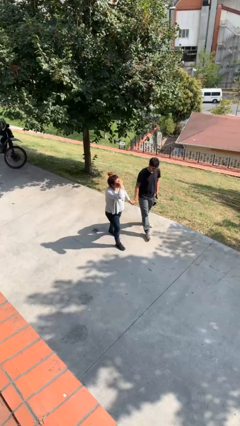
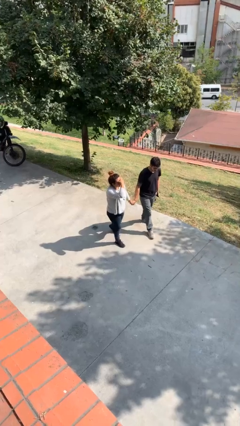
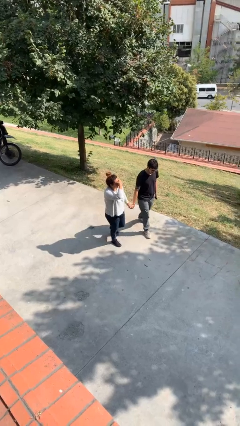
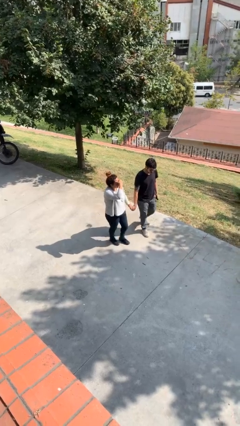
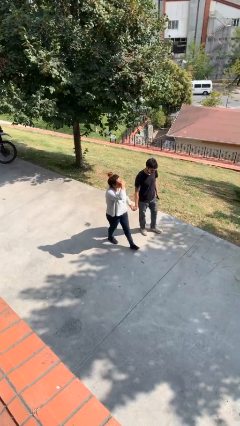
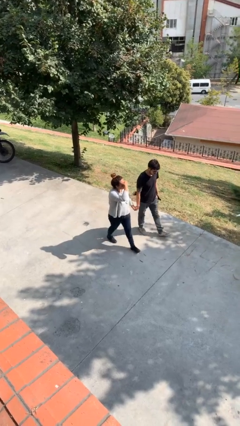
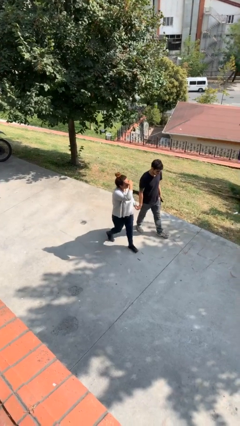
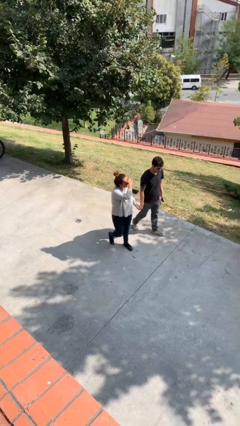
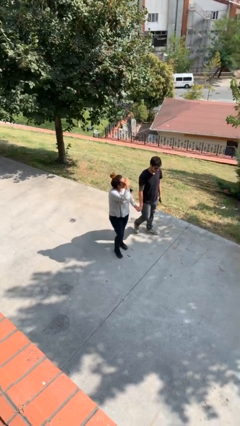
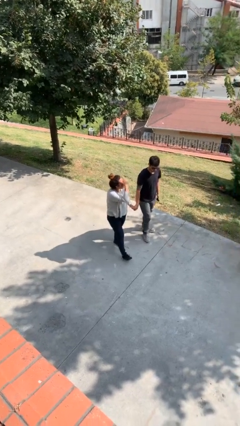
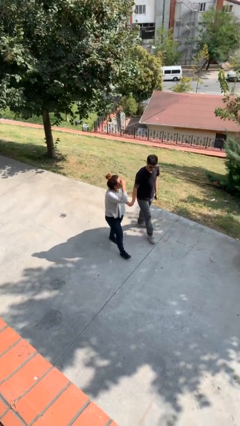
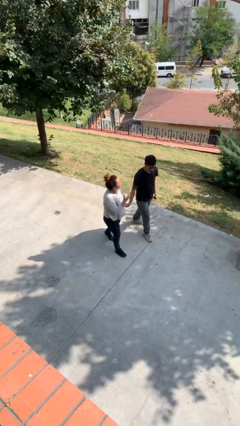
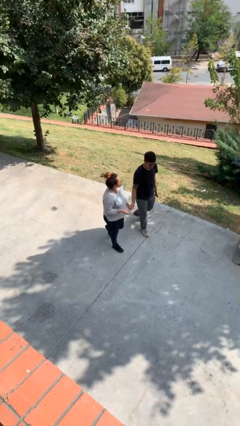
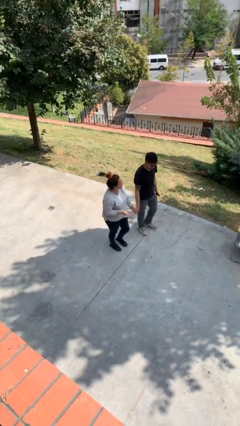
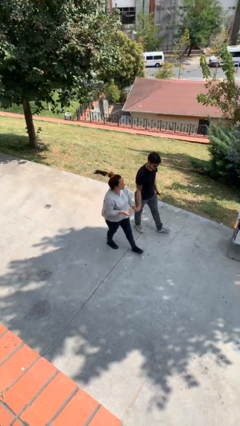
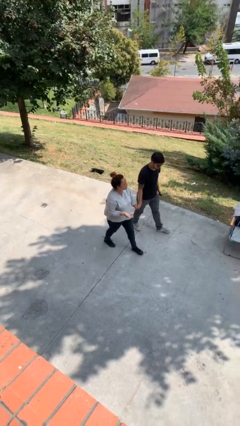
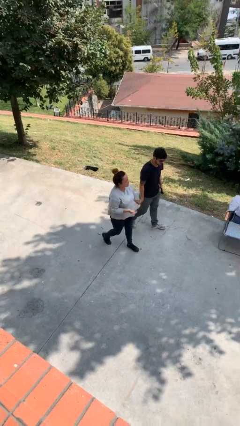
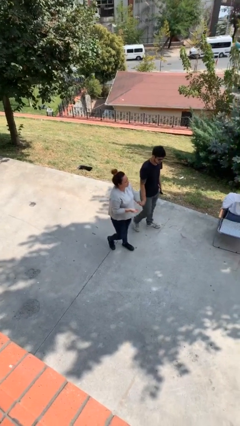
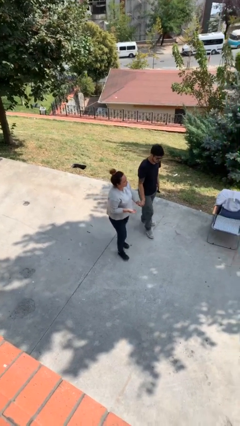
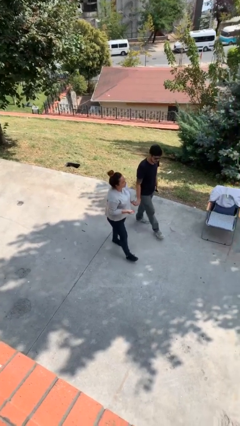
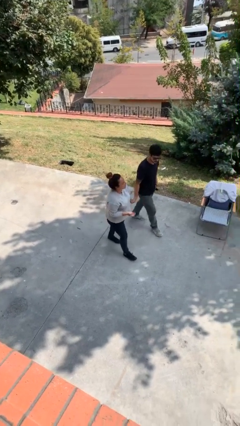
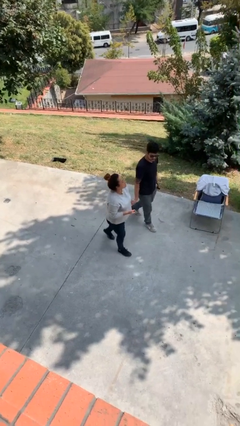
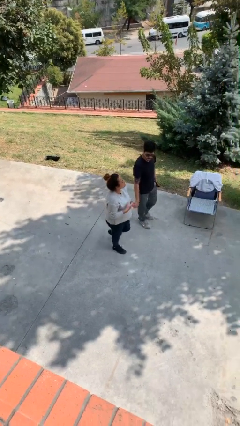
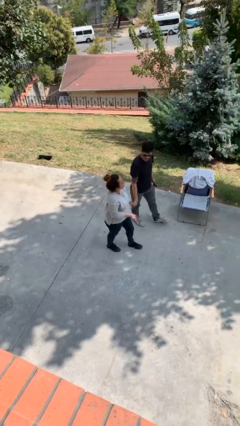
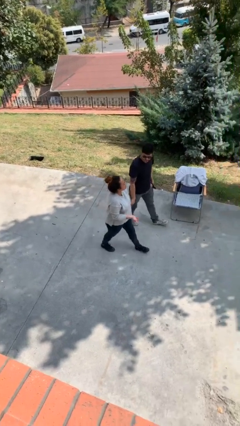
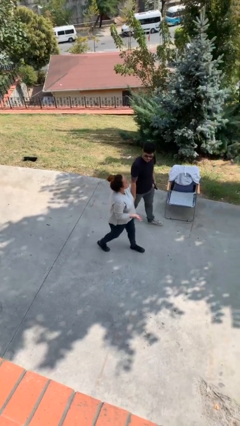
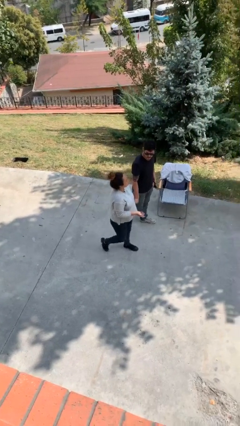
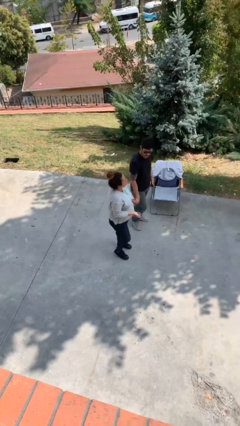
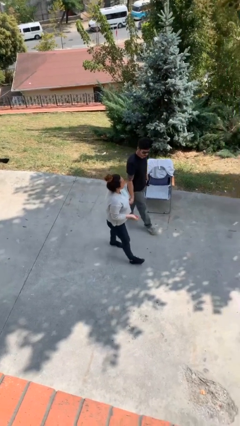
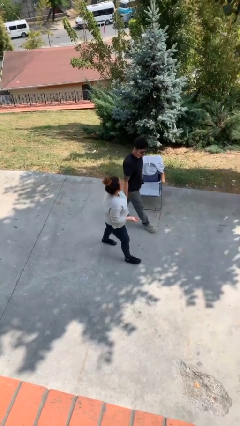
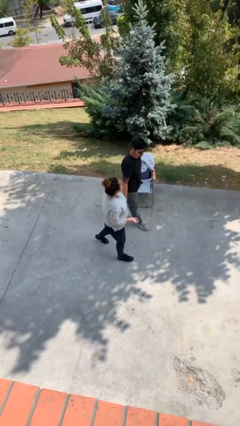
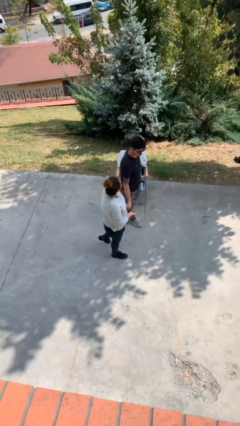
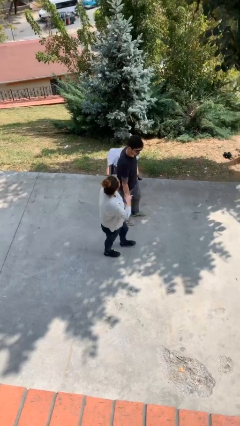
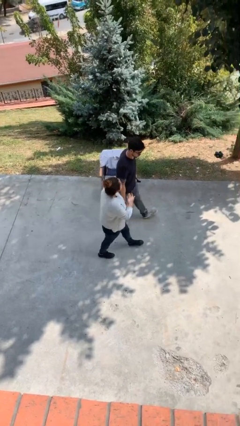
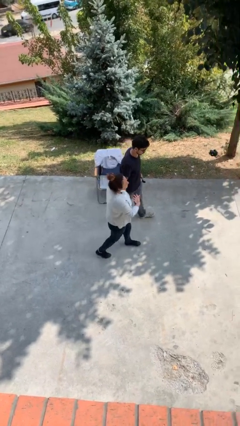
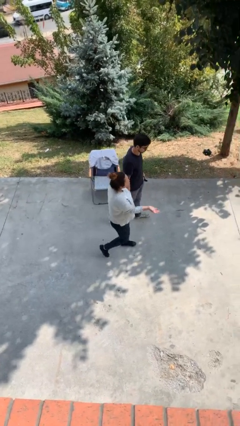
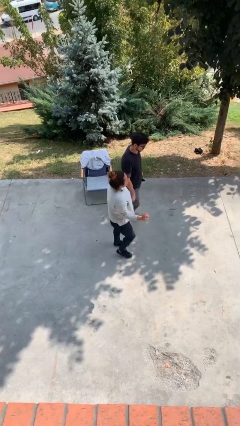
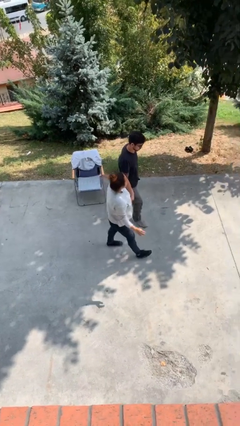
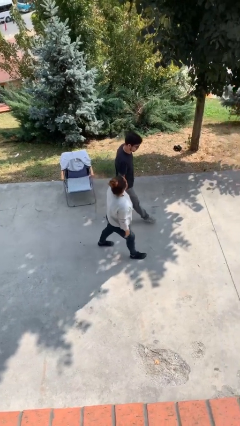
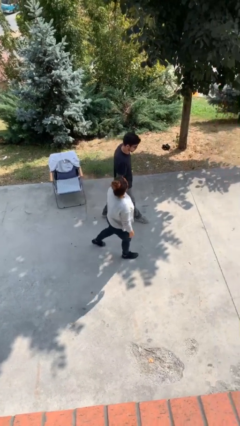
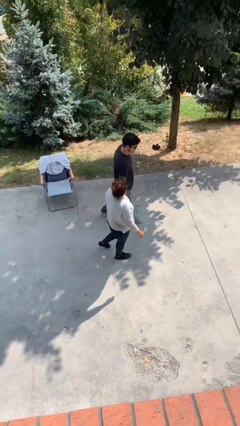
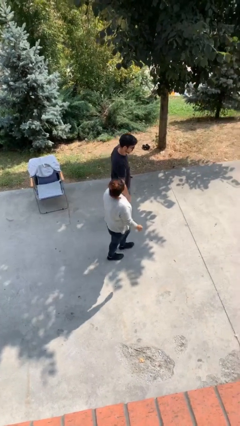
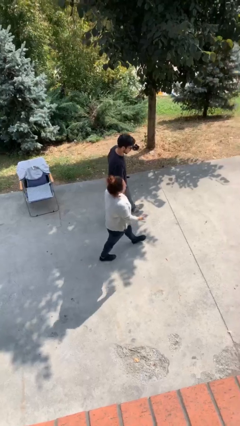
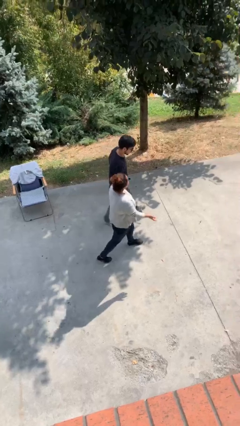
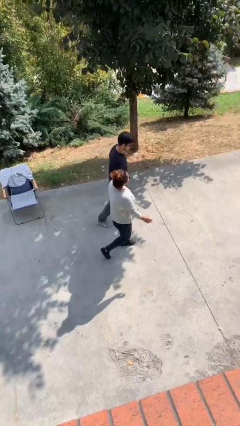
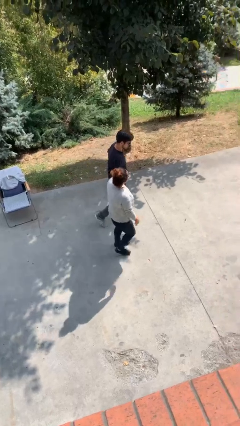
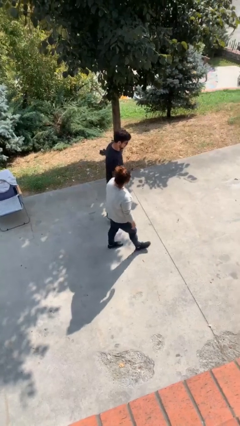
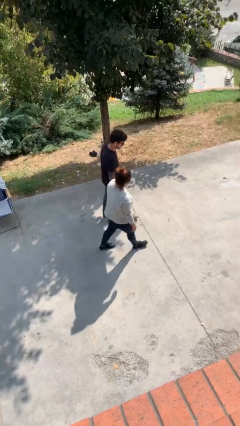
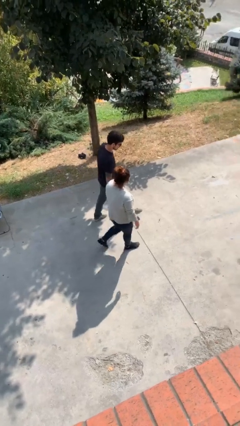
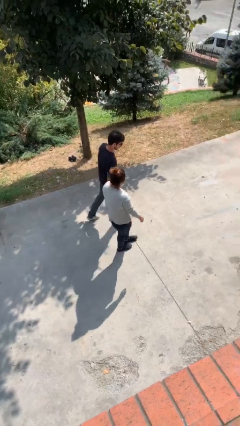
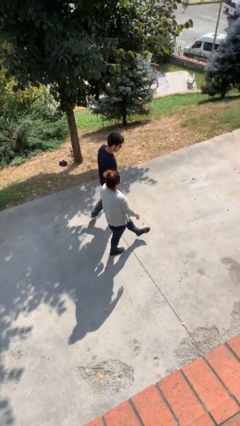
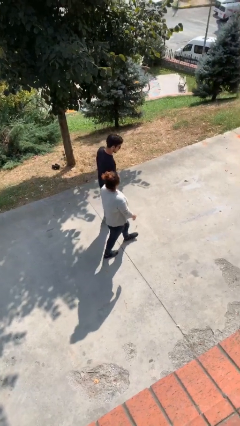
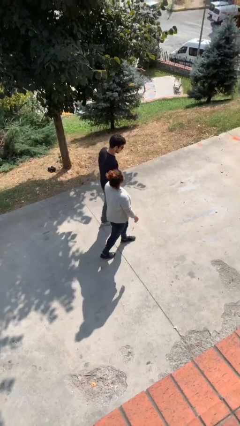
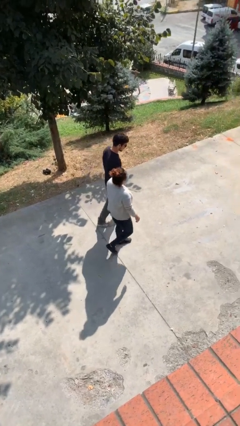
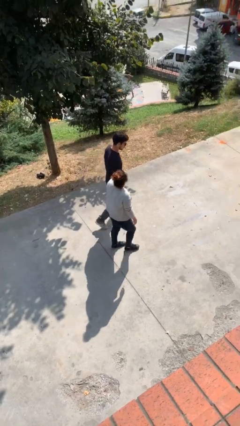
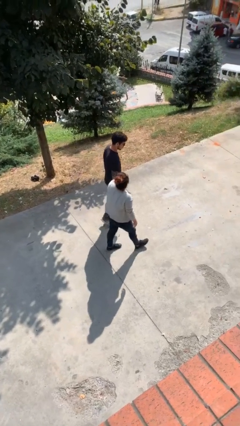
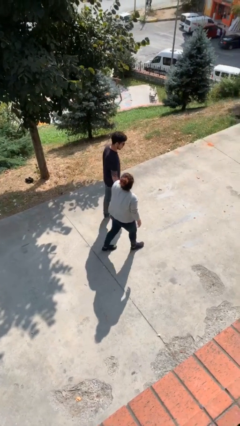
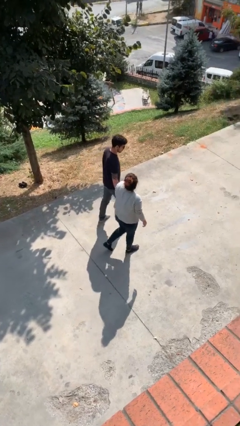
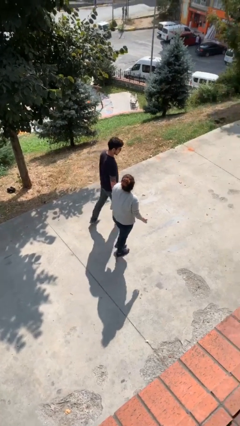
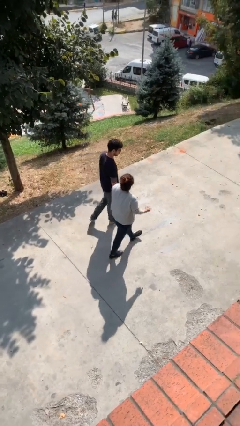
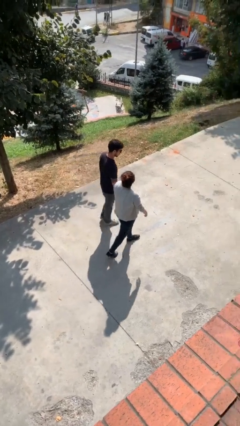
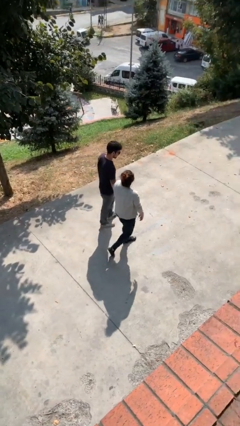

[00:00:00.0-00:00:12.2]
person holds hand

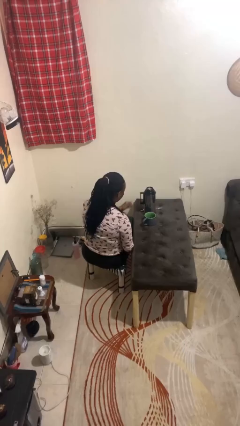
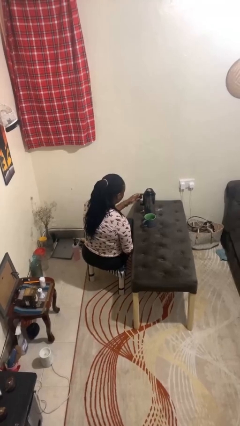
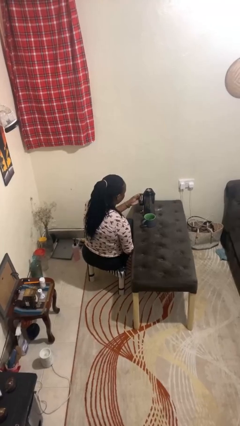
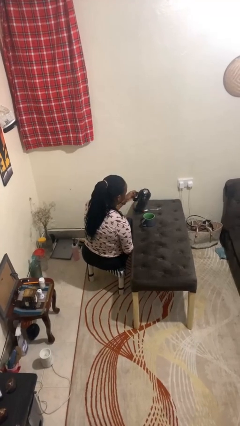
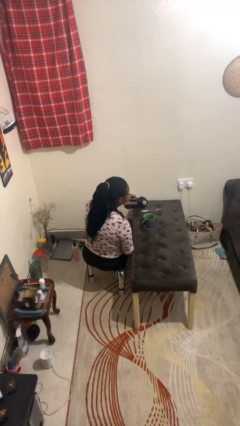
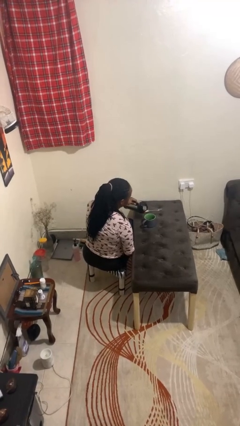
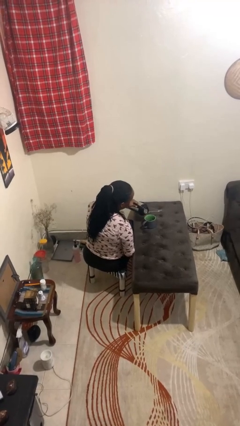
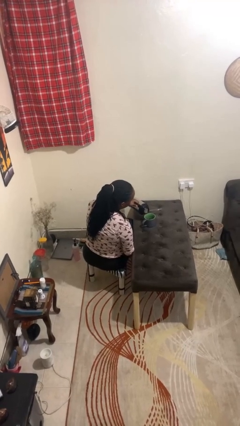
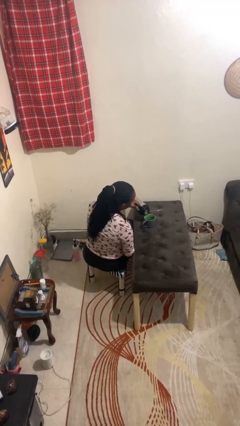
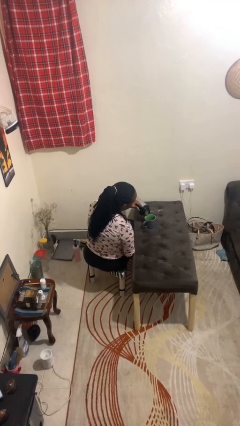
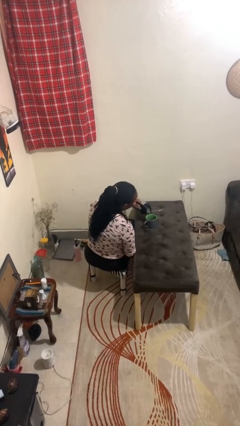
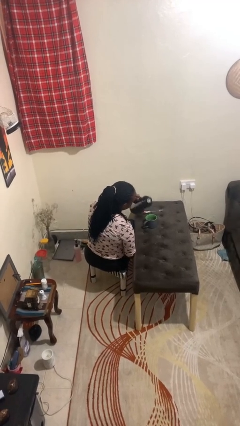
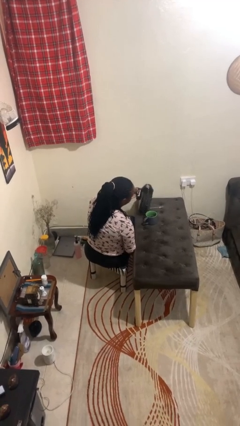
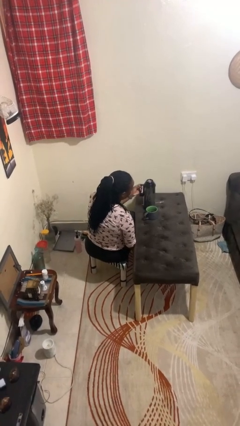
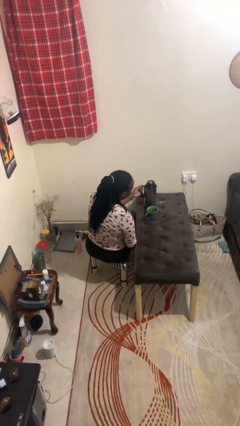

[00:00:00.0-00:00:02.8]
person pours coffee into mug

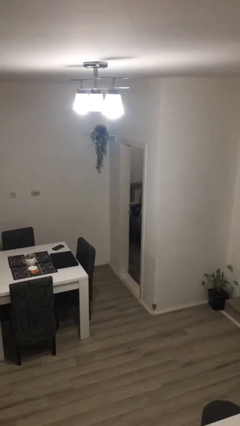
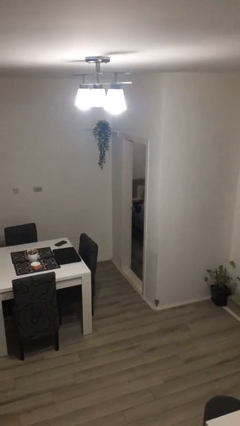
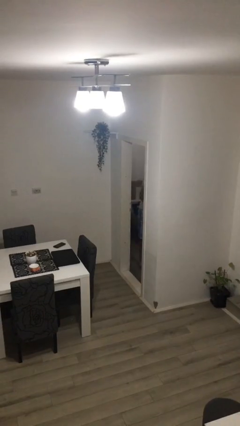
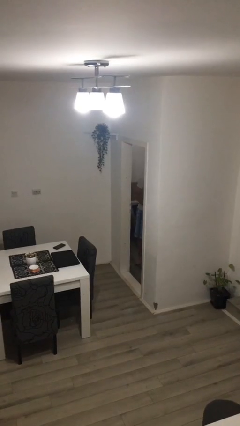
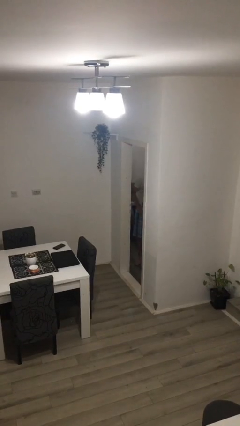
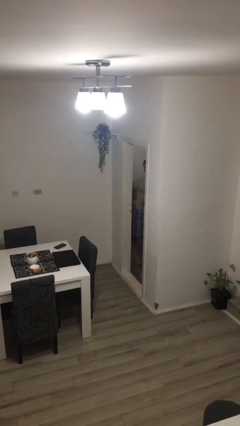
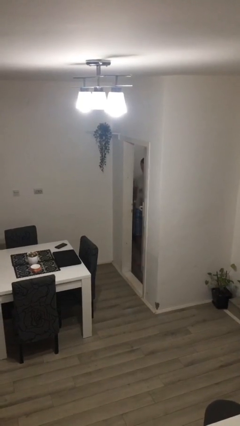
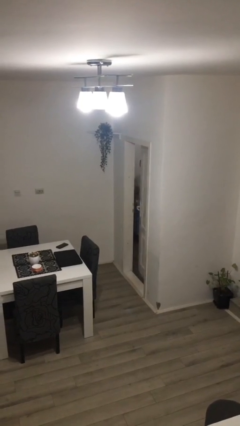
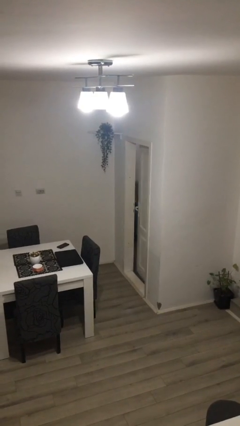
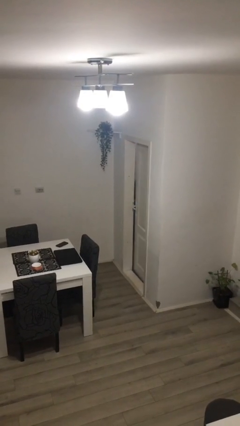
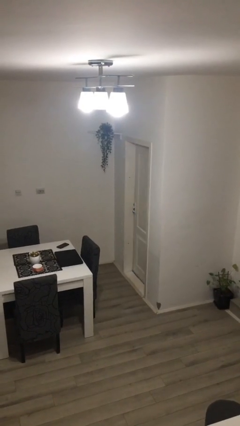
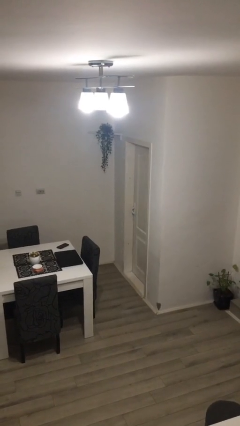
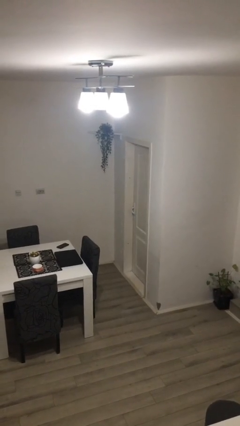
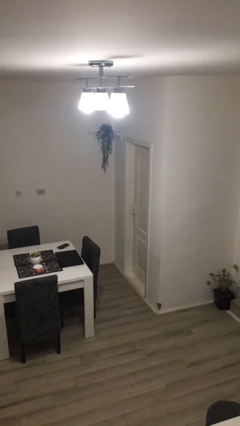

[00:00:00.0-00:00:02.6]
person closes facility door
